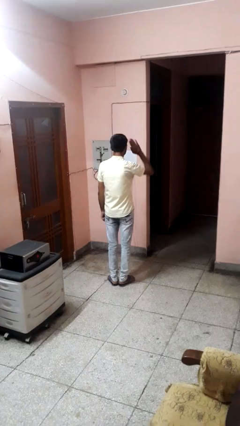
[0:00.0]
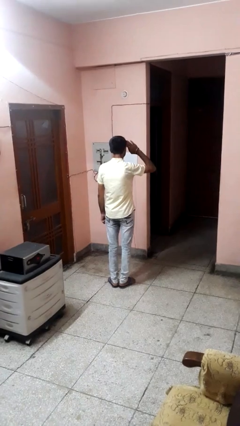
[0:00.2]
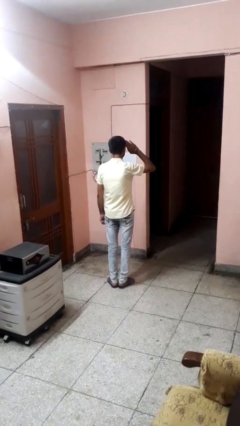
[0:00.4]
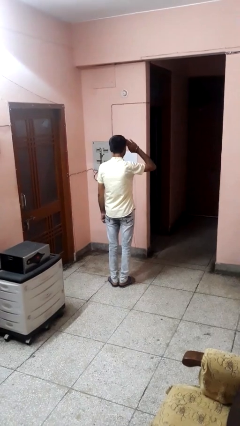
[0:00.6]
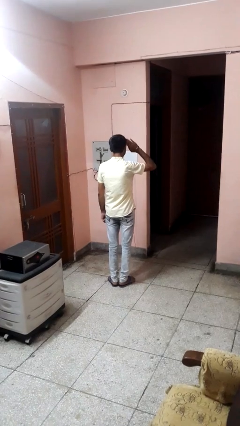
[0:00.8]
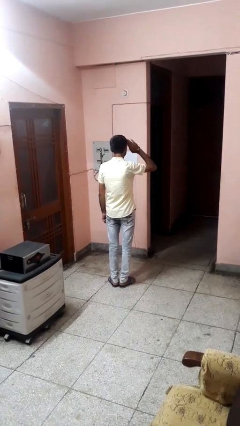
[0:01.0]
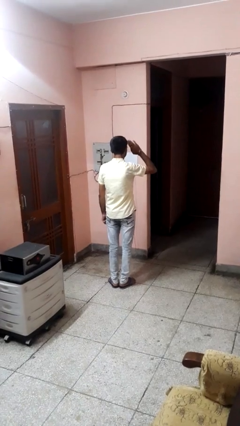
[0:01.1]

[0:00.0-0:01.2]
person salutes

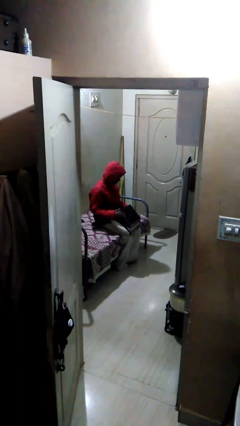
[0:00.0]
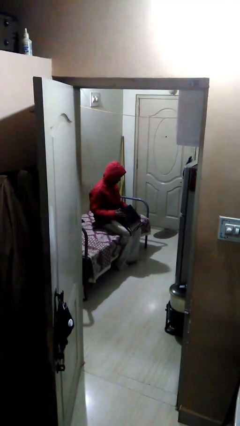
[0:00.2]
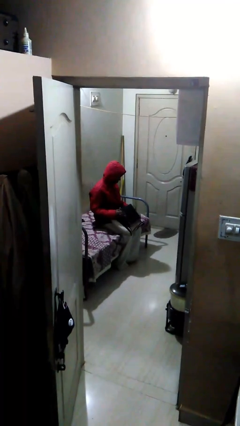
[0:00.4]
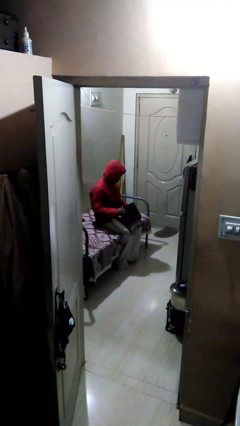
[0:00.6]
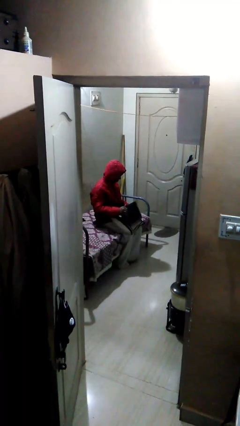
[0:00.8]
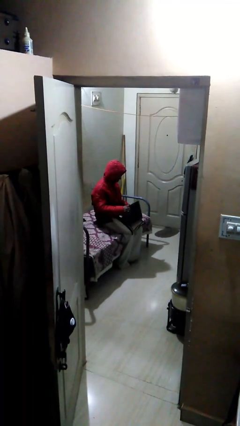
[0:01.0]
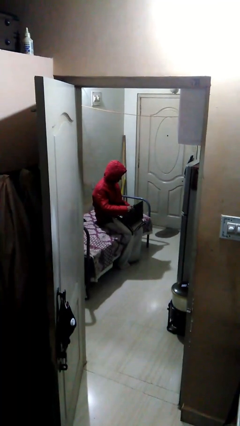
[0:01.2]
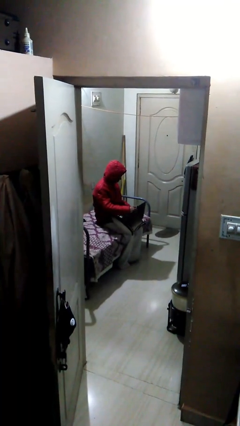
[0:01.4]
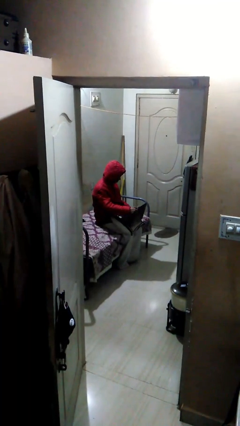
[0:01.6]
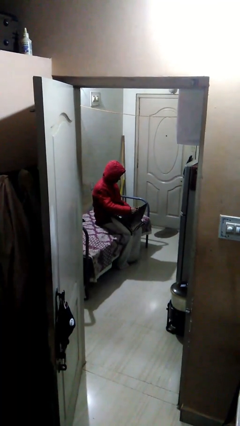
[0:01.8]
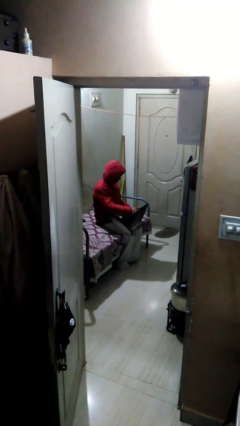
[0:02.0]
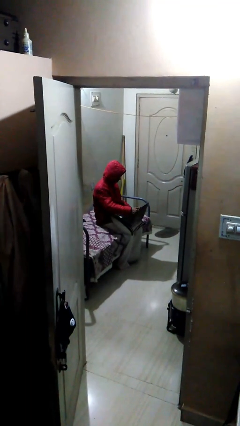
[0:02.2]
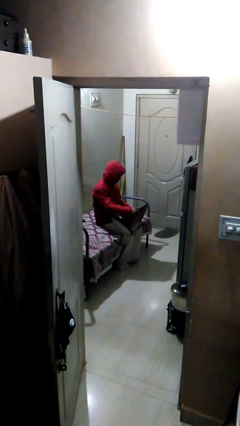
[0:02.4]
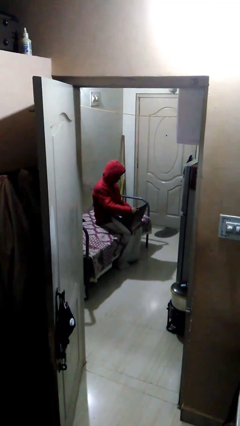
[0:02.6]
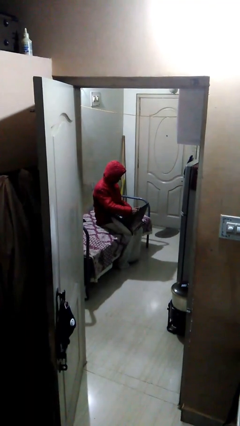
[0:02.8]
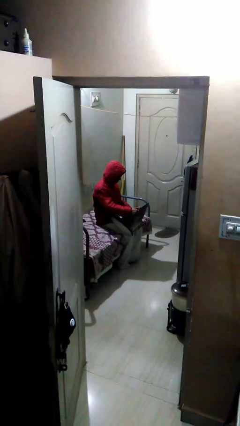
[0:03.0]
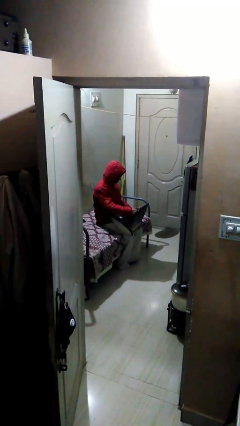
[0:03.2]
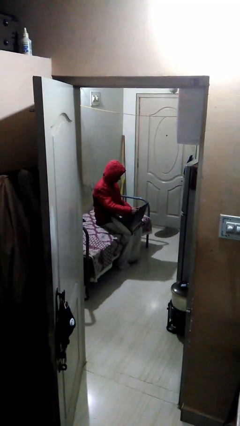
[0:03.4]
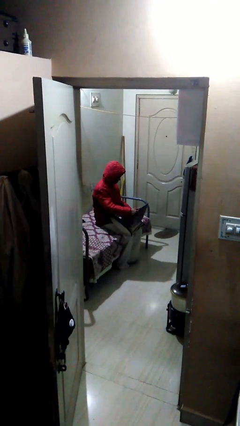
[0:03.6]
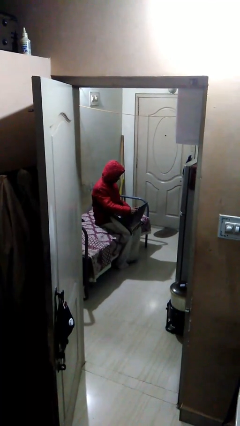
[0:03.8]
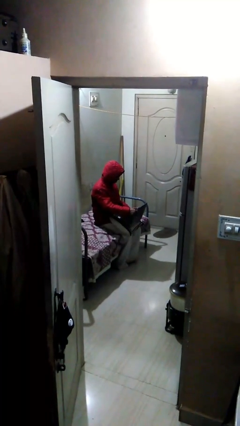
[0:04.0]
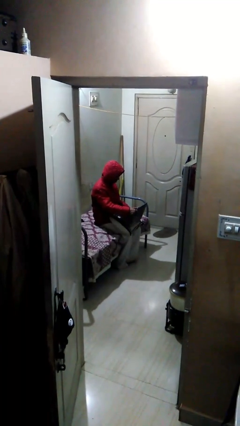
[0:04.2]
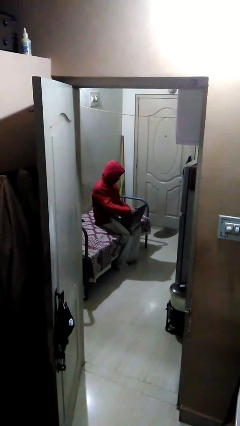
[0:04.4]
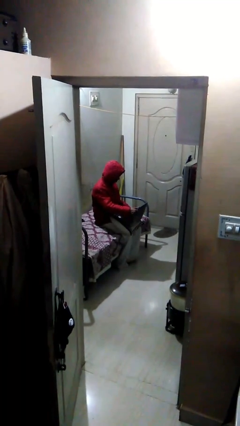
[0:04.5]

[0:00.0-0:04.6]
person interacts with laptop

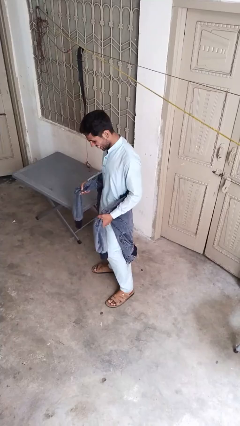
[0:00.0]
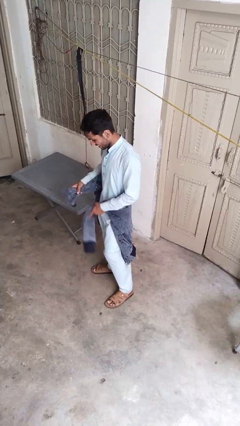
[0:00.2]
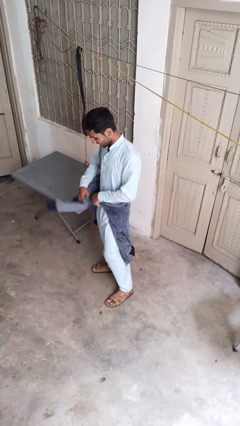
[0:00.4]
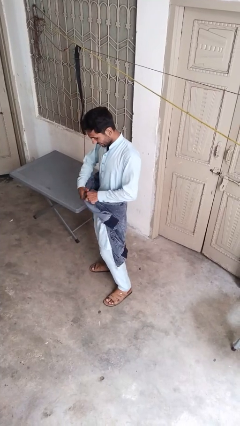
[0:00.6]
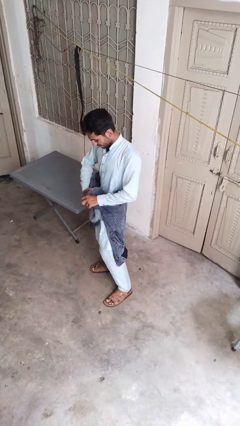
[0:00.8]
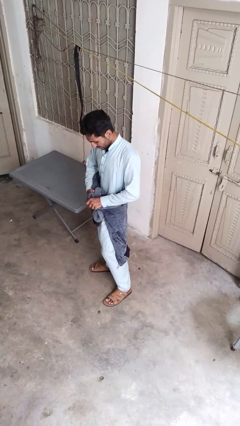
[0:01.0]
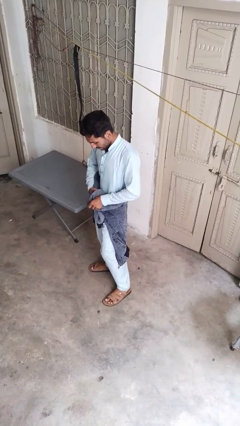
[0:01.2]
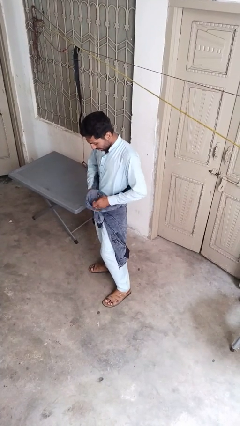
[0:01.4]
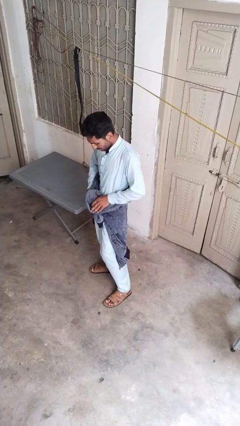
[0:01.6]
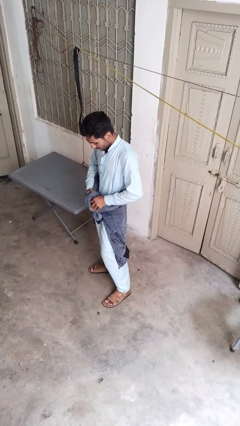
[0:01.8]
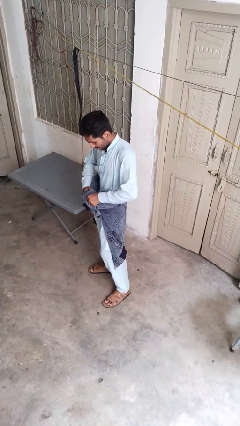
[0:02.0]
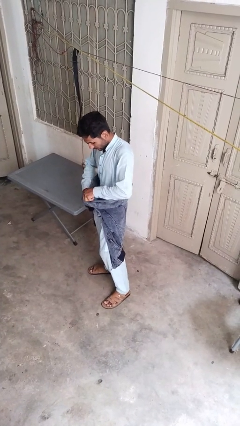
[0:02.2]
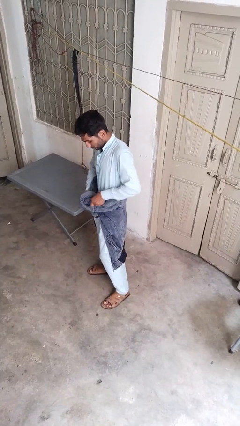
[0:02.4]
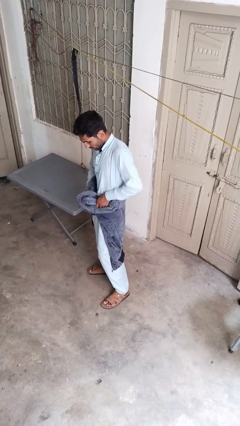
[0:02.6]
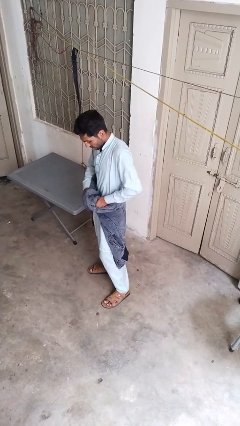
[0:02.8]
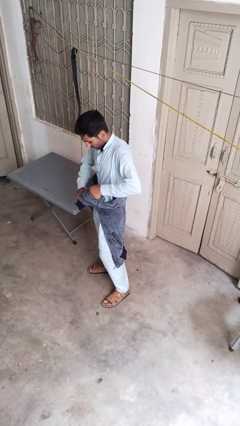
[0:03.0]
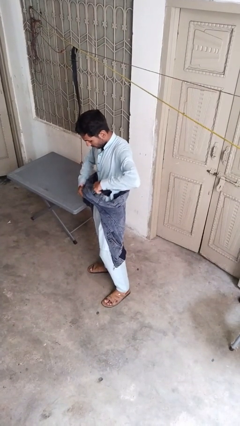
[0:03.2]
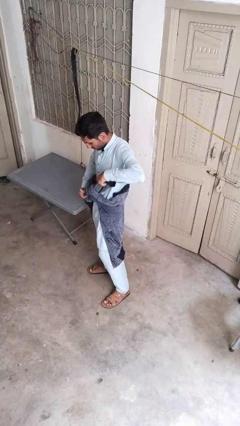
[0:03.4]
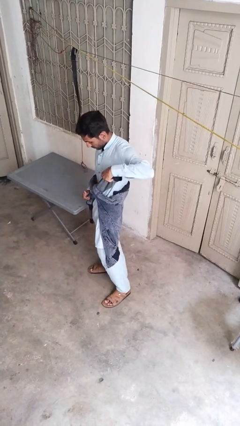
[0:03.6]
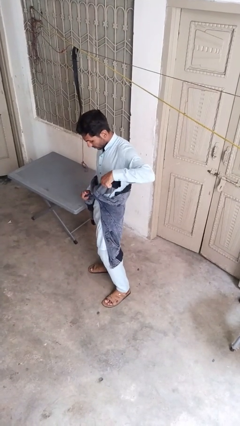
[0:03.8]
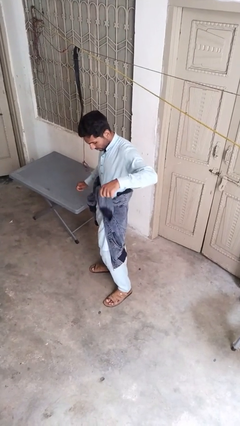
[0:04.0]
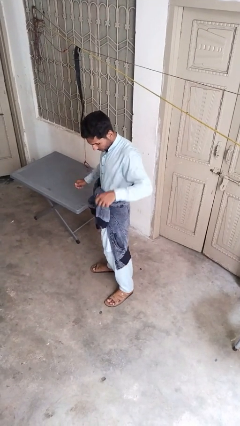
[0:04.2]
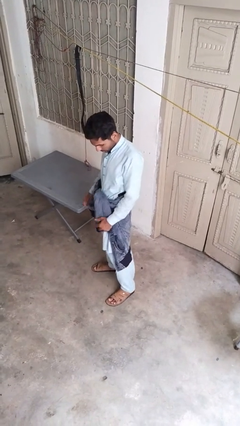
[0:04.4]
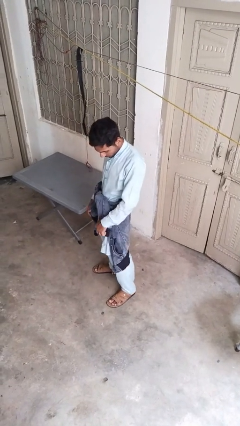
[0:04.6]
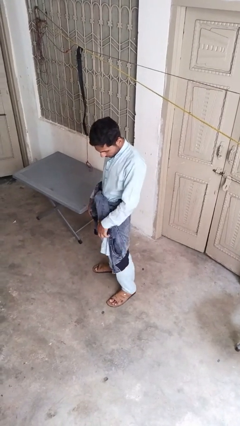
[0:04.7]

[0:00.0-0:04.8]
person ties jacket around waist

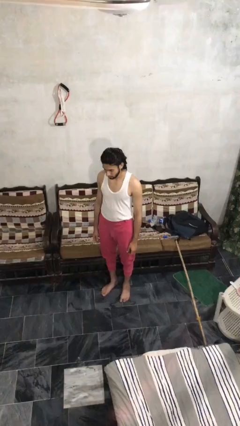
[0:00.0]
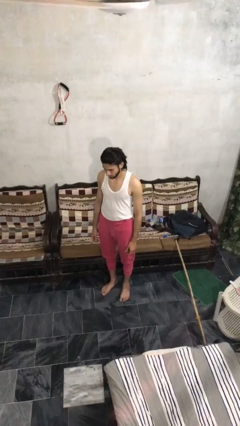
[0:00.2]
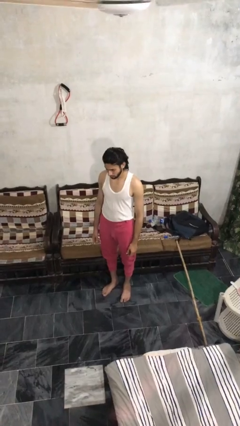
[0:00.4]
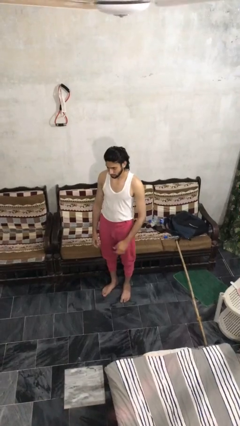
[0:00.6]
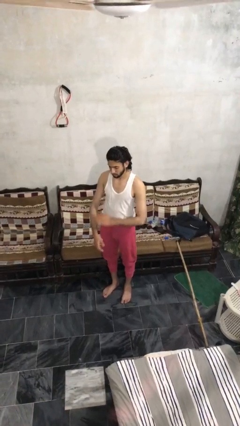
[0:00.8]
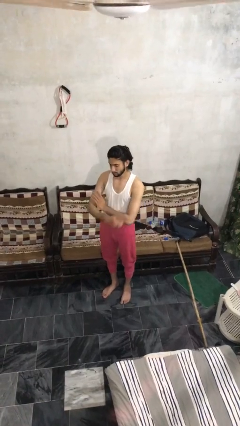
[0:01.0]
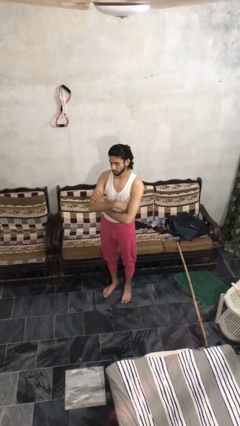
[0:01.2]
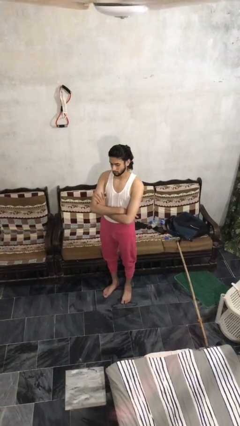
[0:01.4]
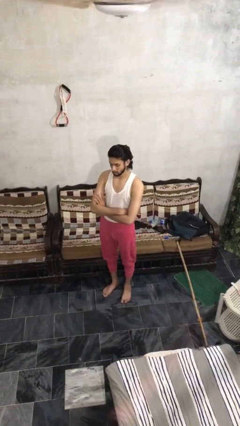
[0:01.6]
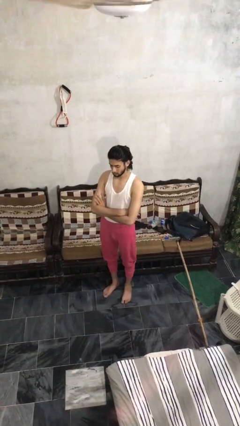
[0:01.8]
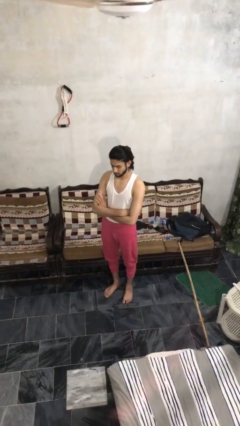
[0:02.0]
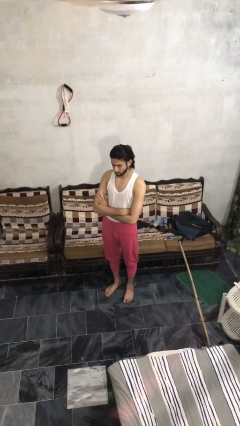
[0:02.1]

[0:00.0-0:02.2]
person crosses arms

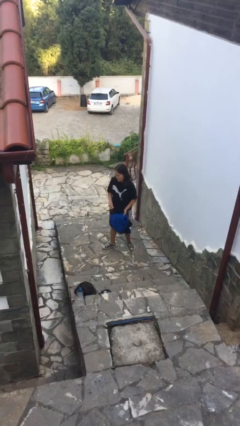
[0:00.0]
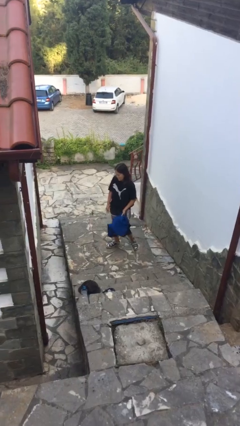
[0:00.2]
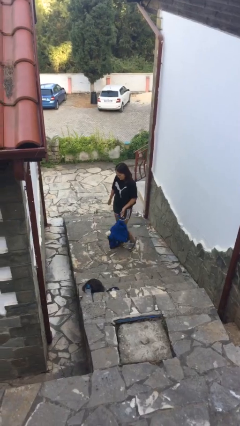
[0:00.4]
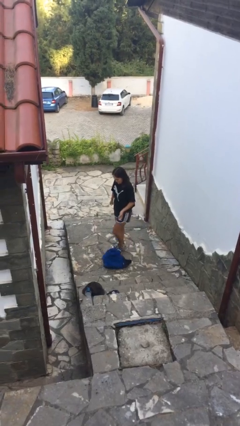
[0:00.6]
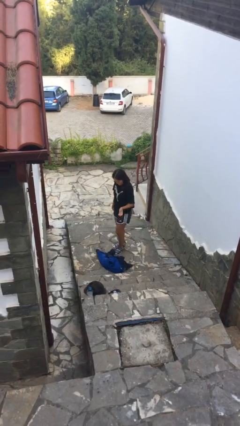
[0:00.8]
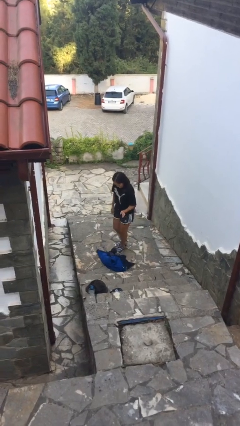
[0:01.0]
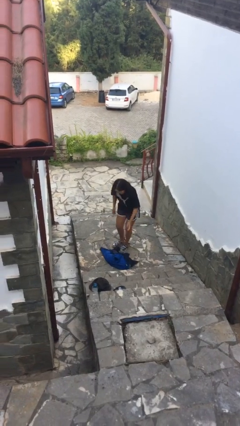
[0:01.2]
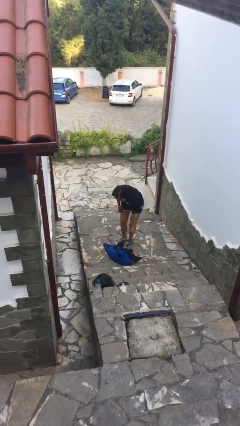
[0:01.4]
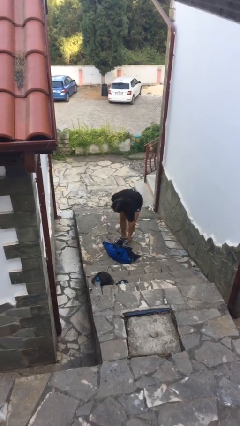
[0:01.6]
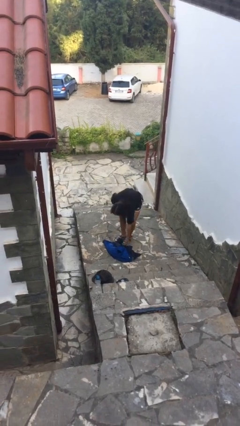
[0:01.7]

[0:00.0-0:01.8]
person drops object

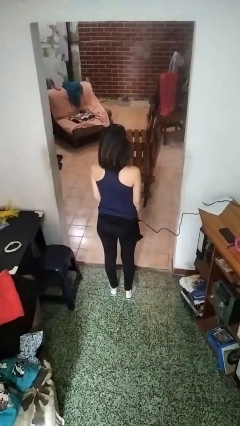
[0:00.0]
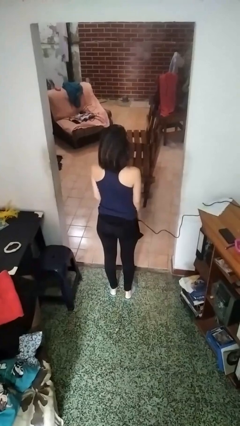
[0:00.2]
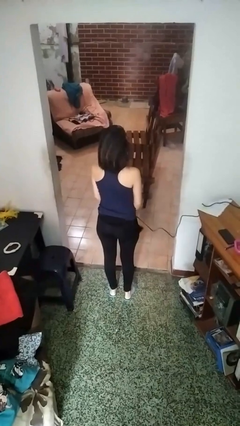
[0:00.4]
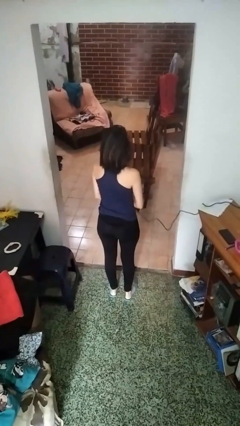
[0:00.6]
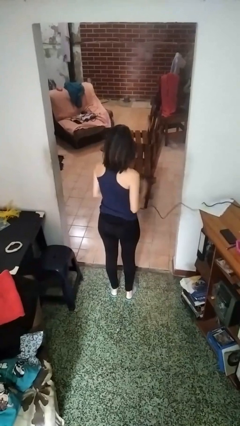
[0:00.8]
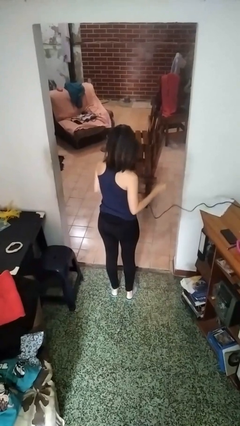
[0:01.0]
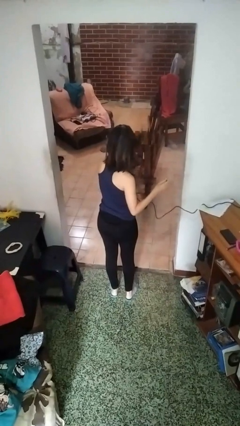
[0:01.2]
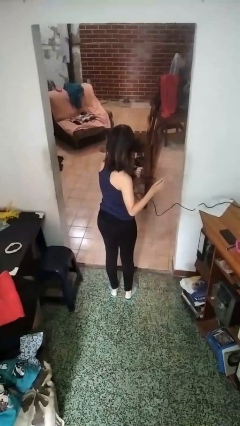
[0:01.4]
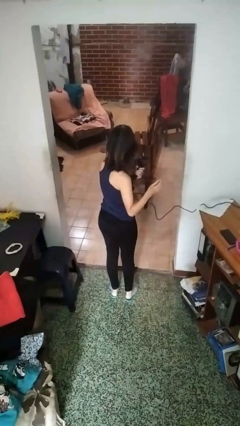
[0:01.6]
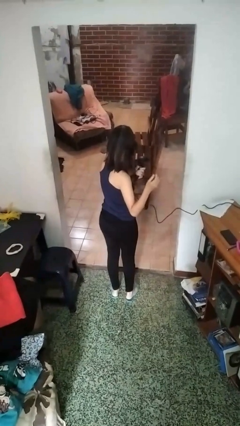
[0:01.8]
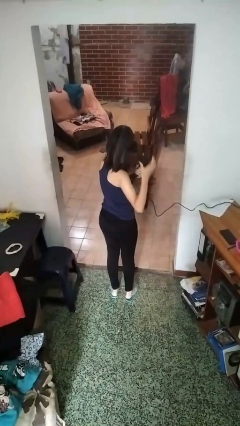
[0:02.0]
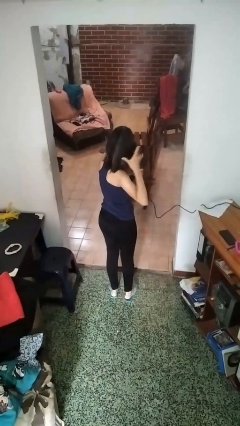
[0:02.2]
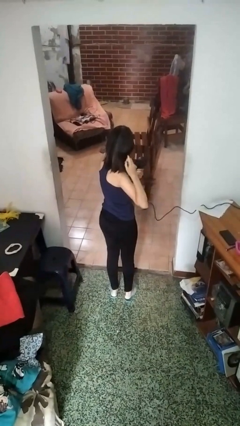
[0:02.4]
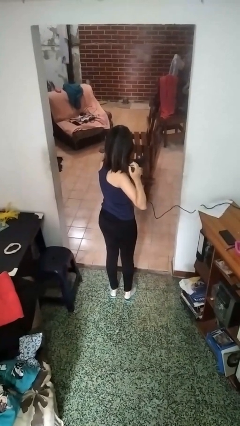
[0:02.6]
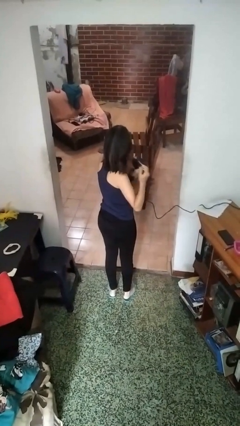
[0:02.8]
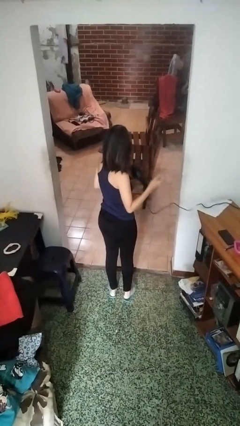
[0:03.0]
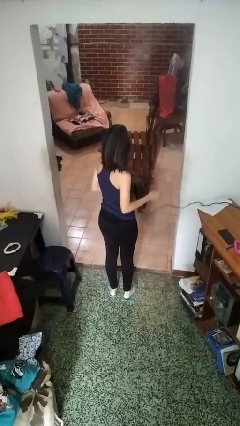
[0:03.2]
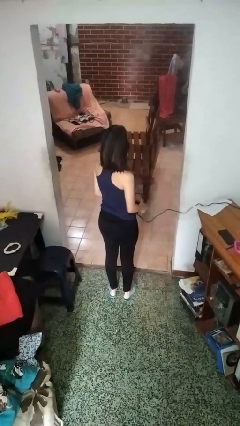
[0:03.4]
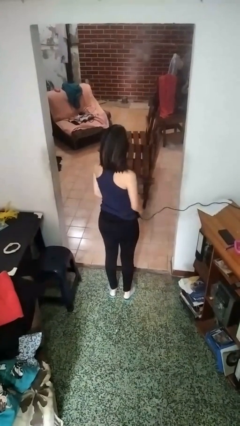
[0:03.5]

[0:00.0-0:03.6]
person dries hair with hairdryer
